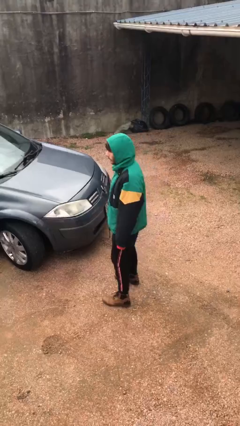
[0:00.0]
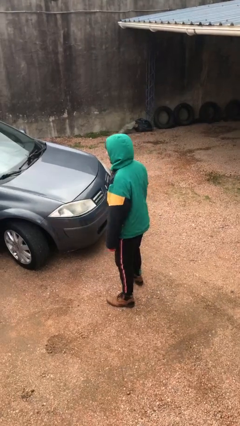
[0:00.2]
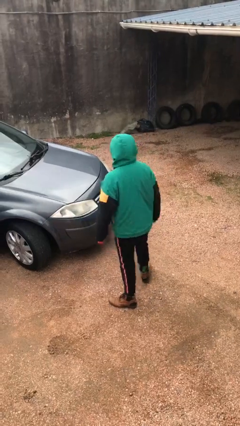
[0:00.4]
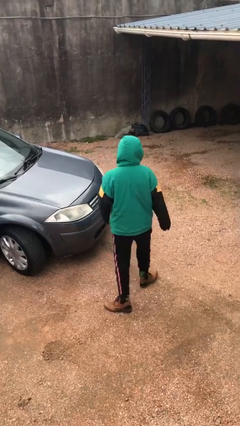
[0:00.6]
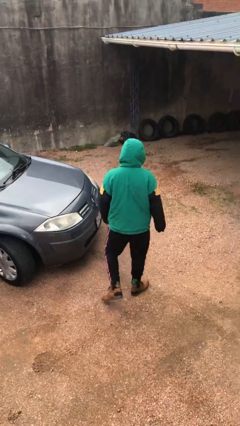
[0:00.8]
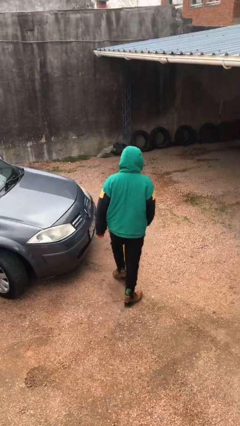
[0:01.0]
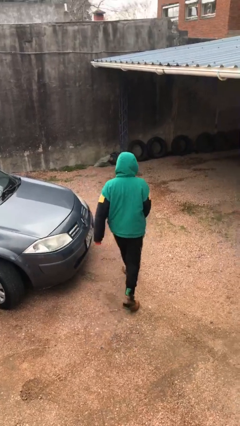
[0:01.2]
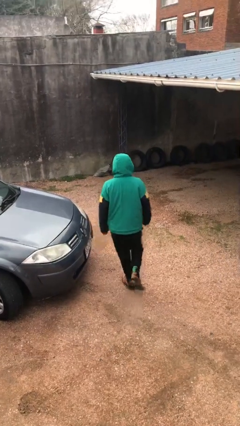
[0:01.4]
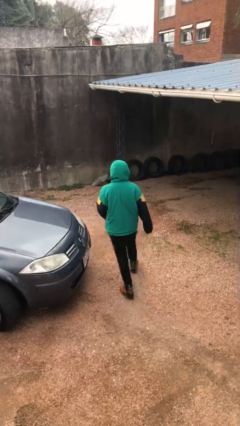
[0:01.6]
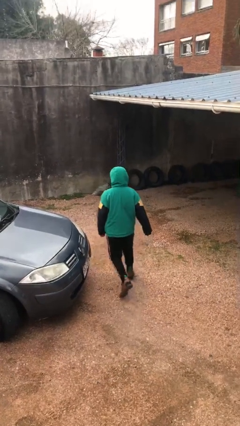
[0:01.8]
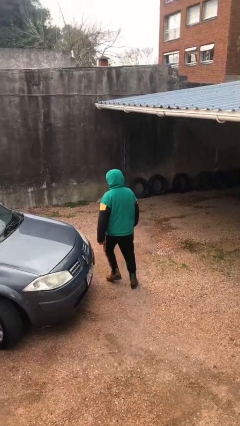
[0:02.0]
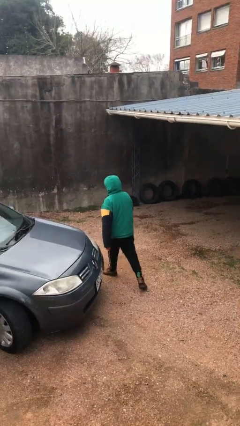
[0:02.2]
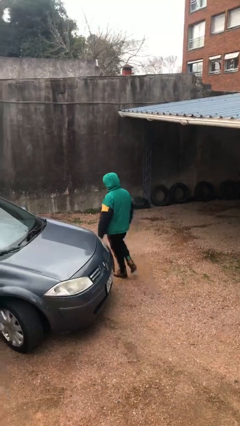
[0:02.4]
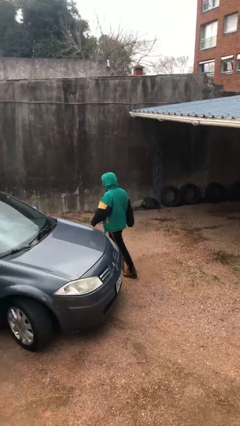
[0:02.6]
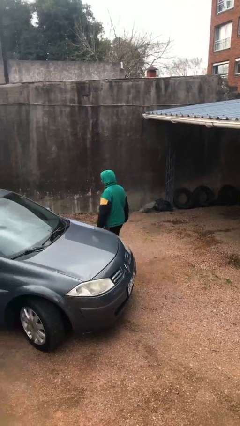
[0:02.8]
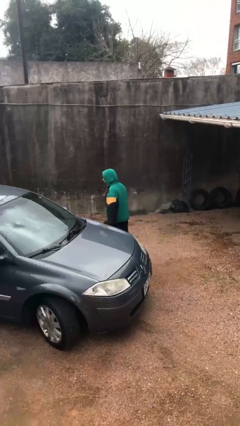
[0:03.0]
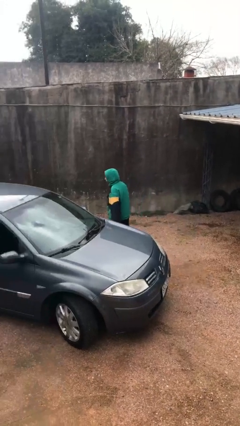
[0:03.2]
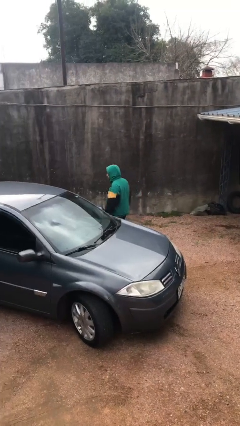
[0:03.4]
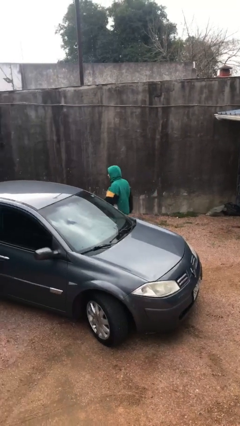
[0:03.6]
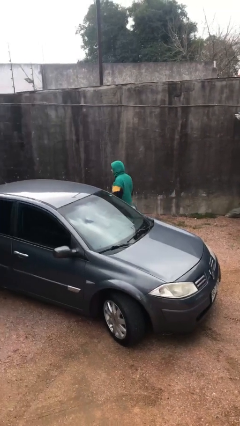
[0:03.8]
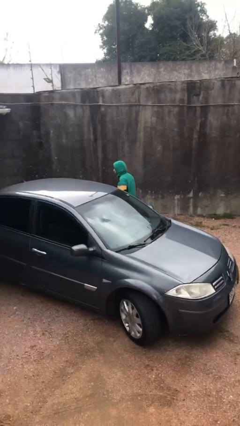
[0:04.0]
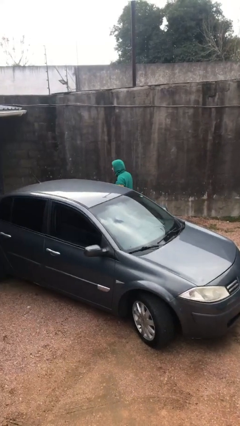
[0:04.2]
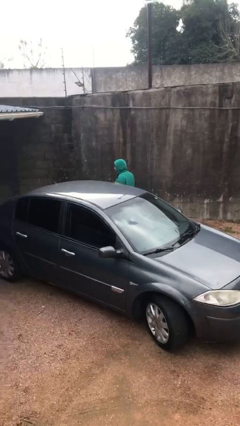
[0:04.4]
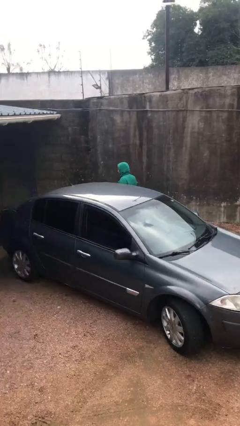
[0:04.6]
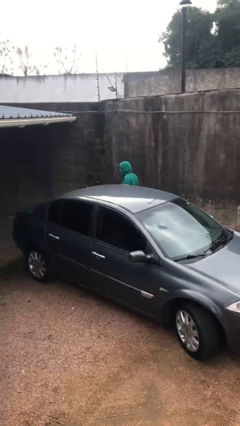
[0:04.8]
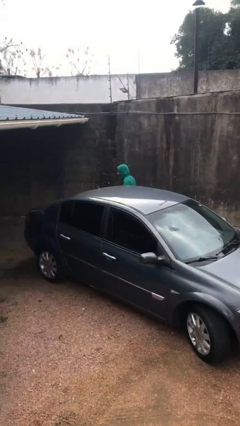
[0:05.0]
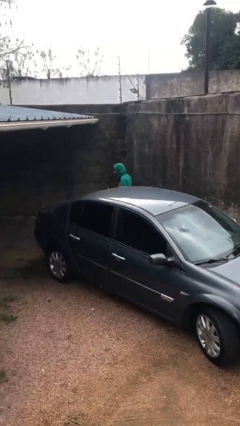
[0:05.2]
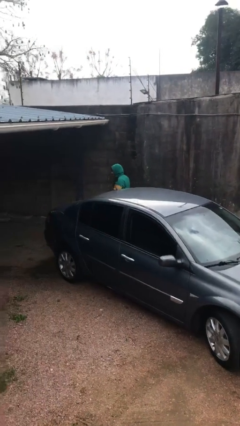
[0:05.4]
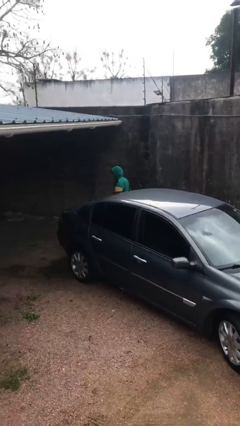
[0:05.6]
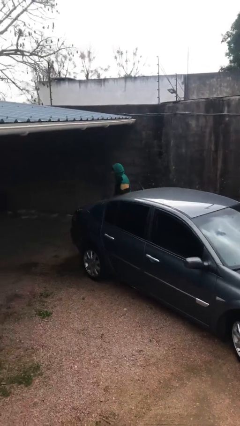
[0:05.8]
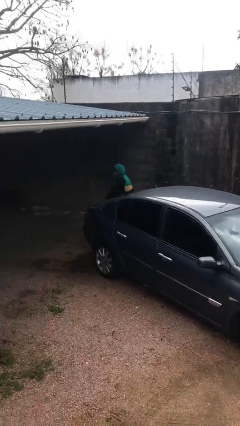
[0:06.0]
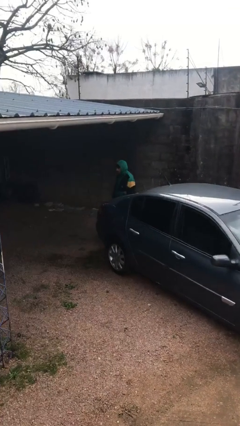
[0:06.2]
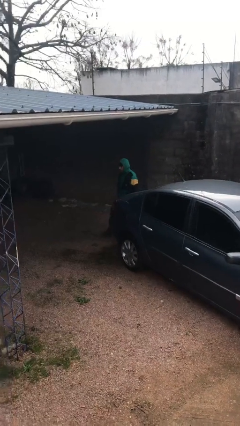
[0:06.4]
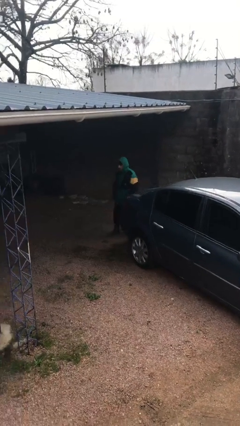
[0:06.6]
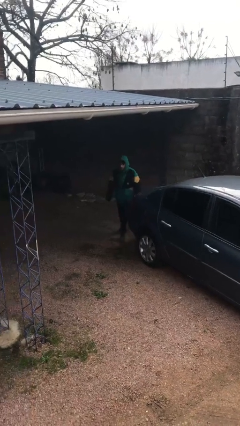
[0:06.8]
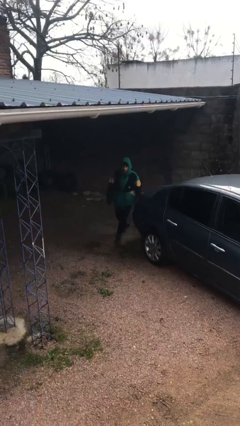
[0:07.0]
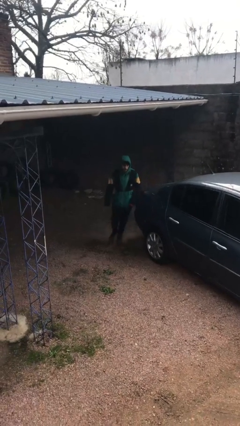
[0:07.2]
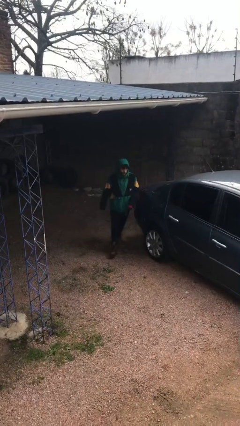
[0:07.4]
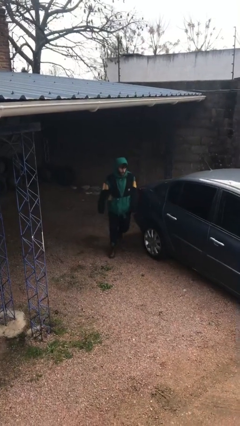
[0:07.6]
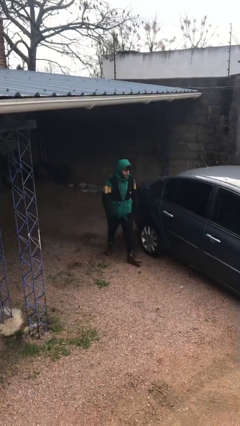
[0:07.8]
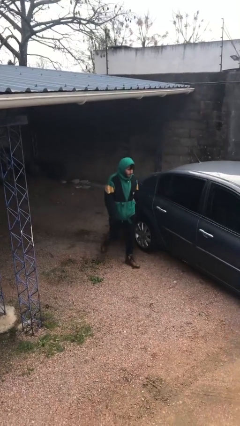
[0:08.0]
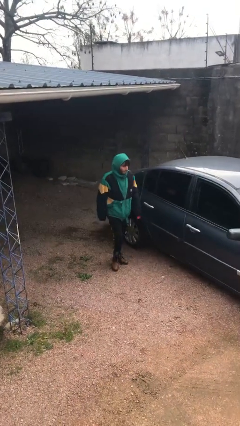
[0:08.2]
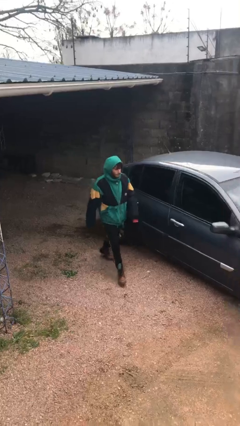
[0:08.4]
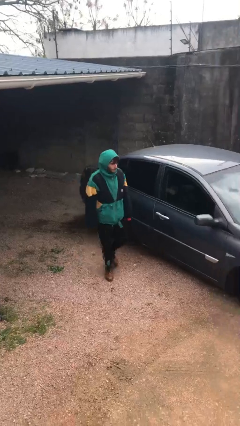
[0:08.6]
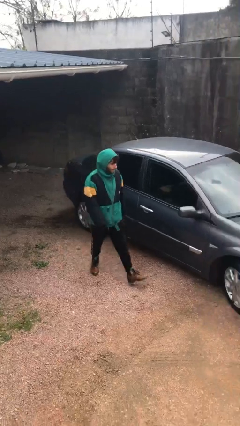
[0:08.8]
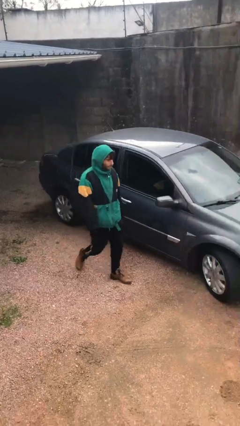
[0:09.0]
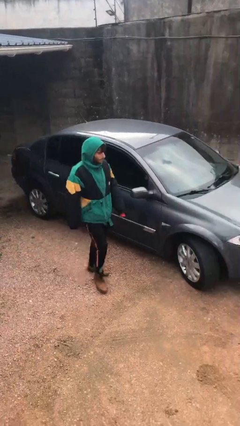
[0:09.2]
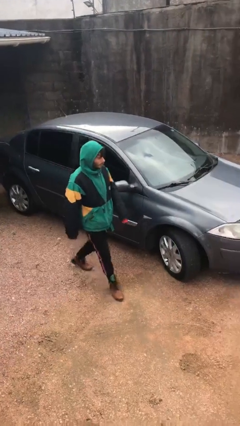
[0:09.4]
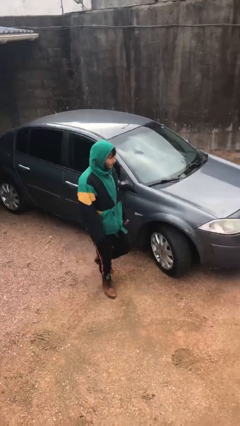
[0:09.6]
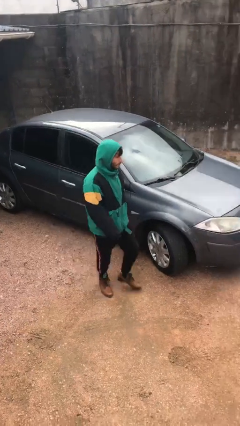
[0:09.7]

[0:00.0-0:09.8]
person walks around car

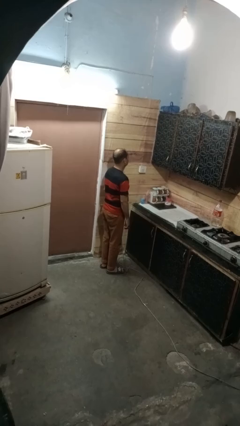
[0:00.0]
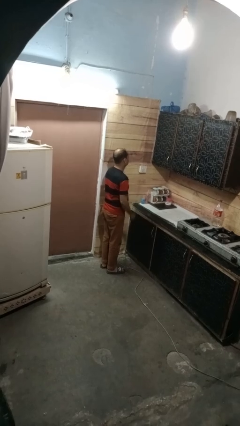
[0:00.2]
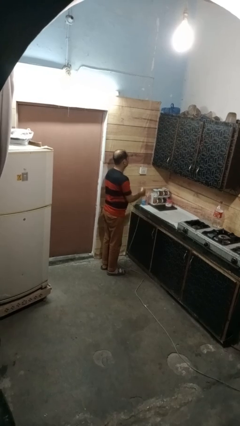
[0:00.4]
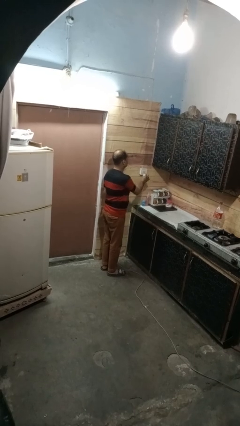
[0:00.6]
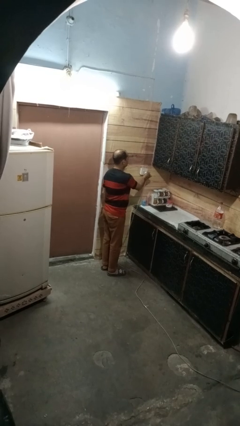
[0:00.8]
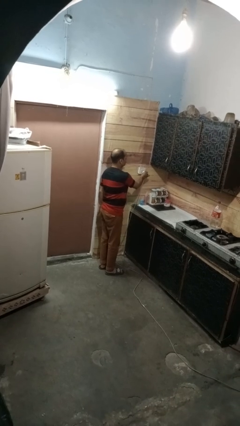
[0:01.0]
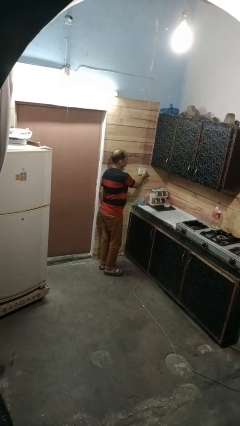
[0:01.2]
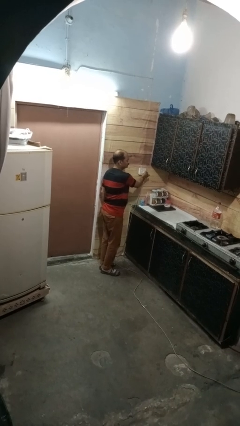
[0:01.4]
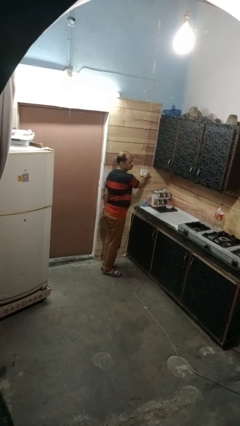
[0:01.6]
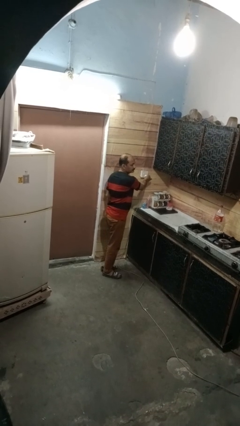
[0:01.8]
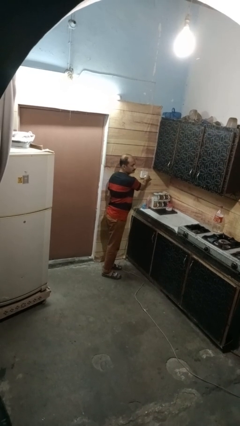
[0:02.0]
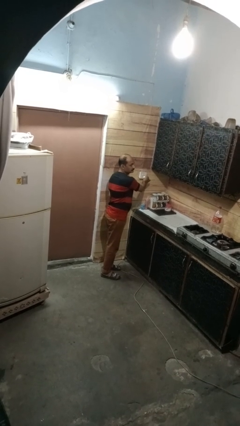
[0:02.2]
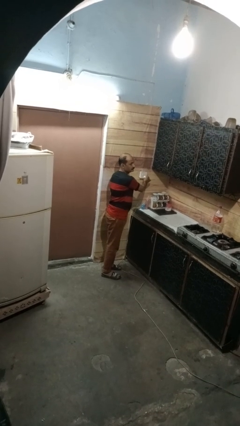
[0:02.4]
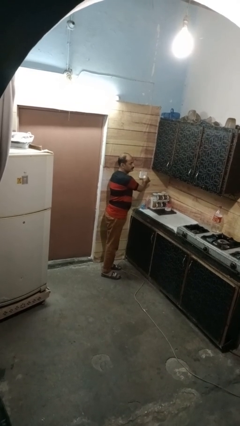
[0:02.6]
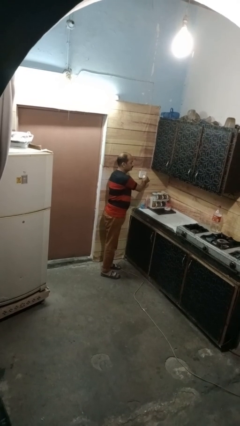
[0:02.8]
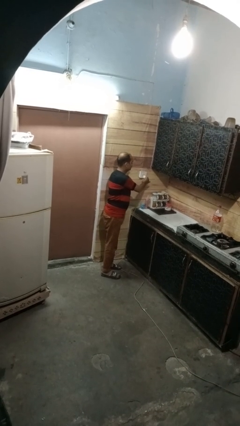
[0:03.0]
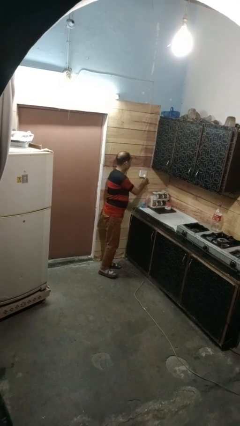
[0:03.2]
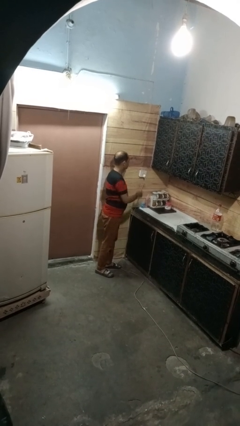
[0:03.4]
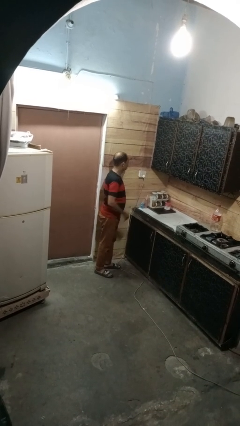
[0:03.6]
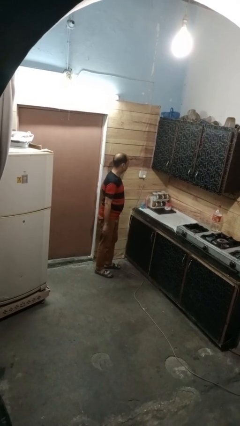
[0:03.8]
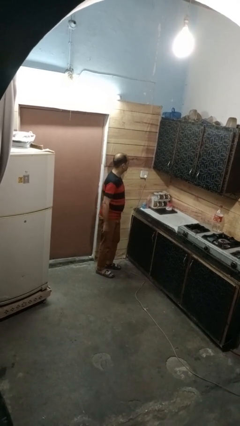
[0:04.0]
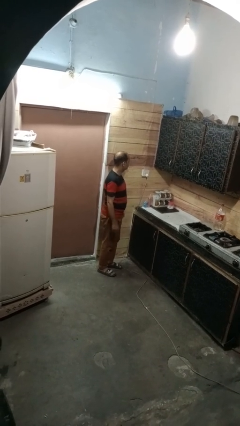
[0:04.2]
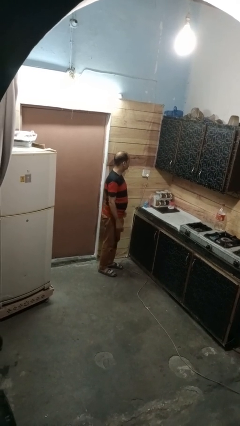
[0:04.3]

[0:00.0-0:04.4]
person plugs into electrical socket

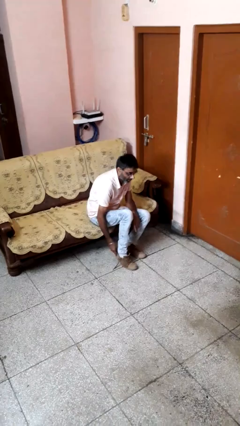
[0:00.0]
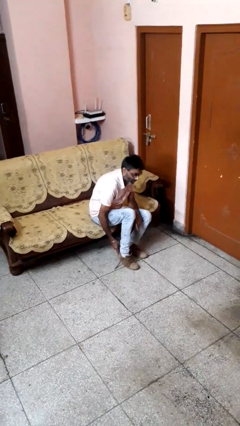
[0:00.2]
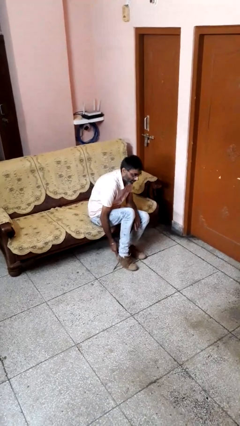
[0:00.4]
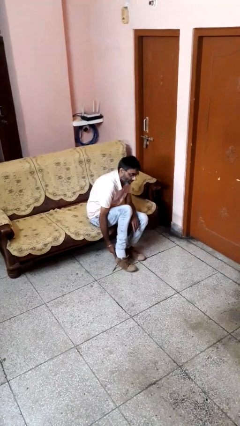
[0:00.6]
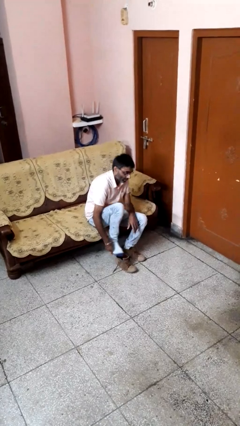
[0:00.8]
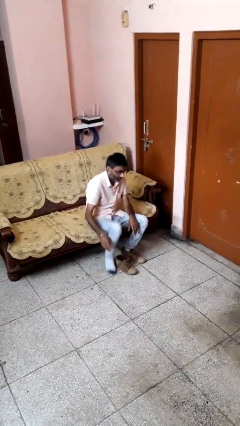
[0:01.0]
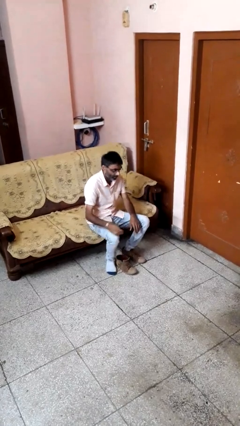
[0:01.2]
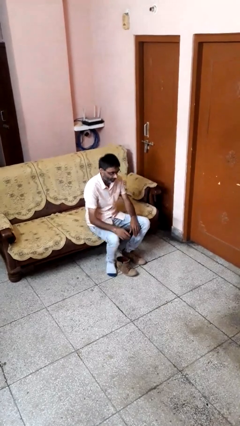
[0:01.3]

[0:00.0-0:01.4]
person takes off shoes

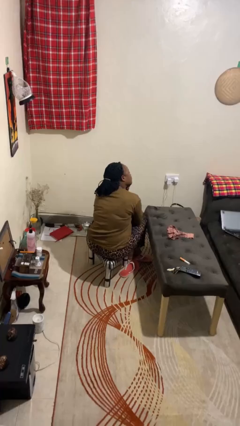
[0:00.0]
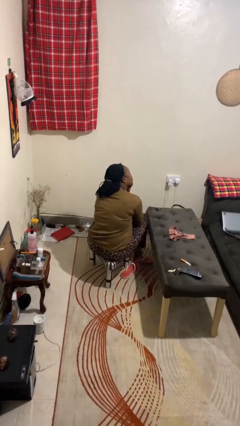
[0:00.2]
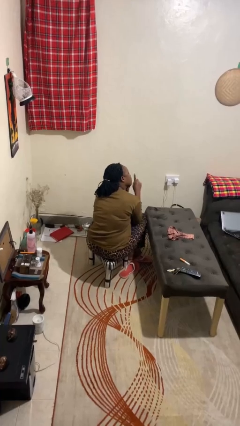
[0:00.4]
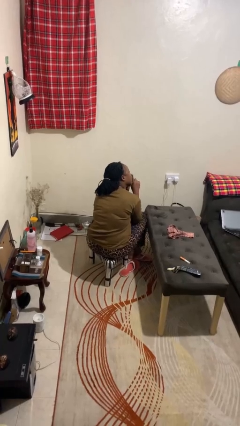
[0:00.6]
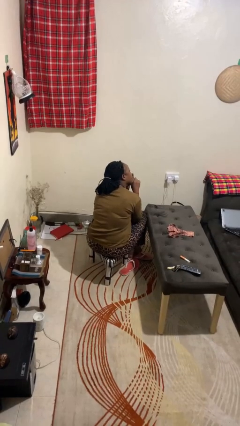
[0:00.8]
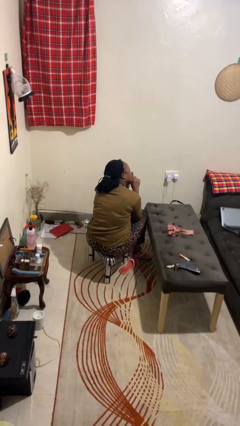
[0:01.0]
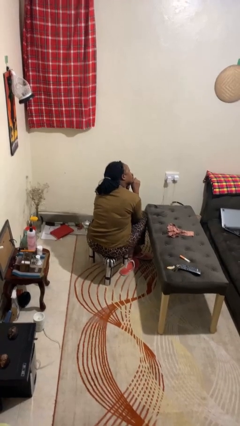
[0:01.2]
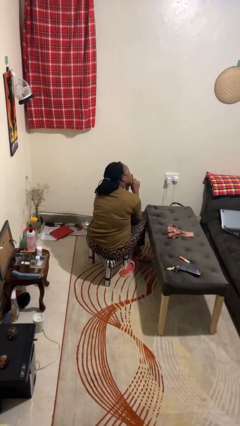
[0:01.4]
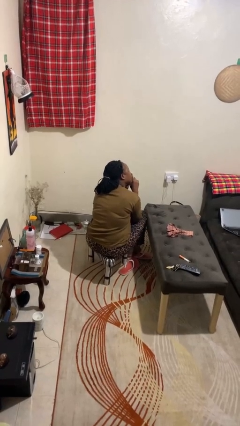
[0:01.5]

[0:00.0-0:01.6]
person gestures be quiet

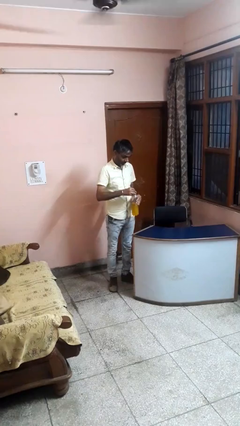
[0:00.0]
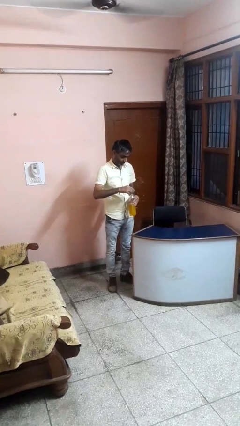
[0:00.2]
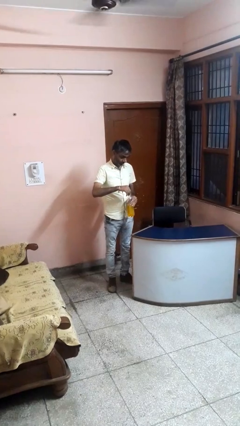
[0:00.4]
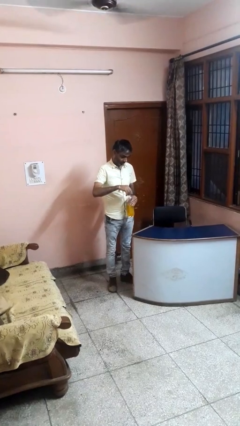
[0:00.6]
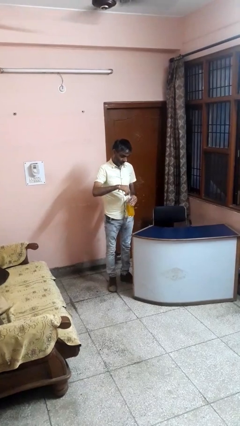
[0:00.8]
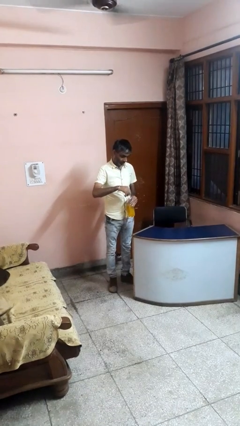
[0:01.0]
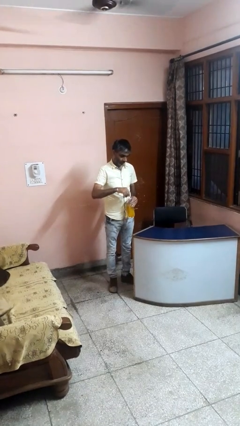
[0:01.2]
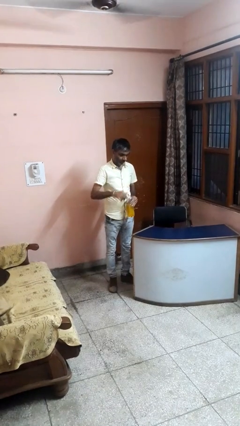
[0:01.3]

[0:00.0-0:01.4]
person screws lid to bottle
